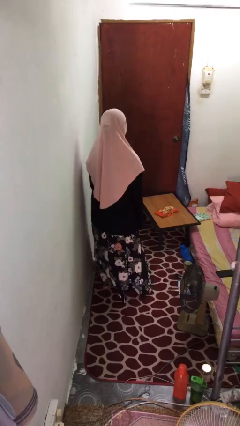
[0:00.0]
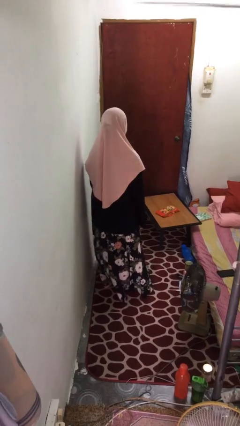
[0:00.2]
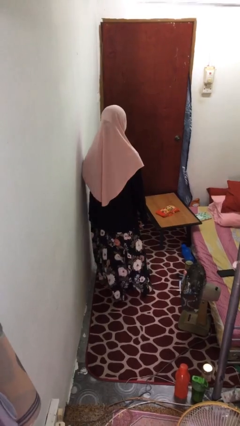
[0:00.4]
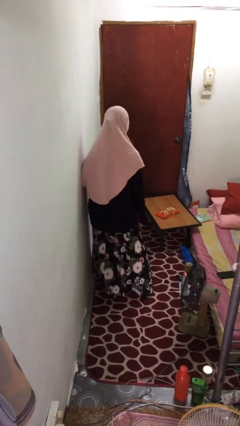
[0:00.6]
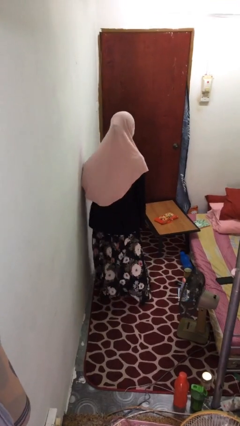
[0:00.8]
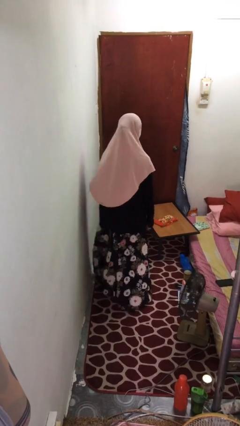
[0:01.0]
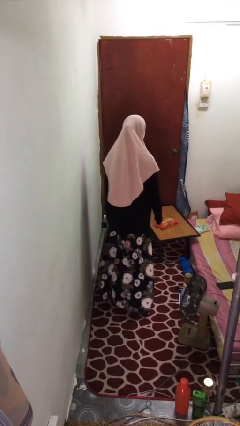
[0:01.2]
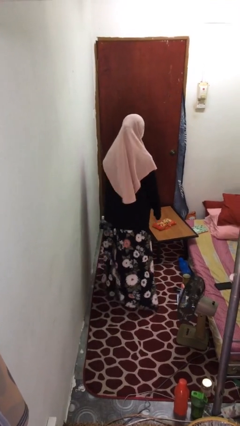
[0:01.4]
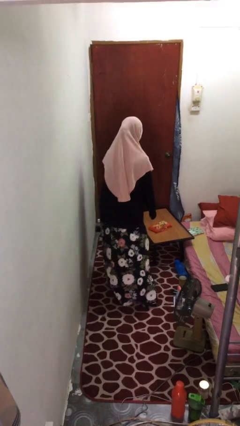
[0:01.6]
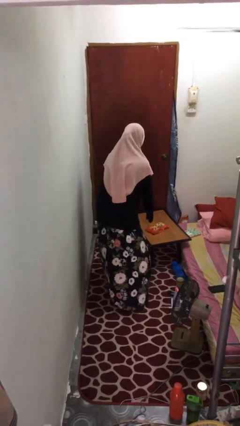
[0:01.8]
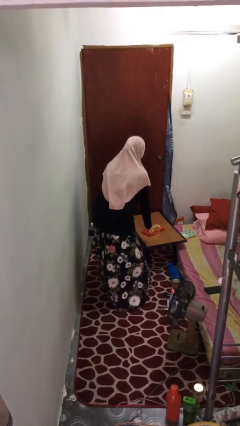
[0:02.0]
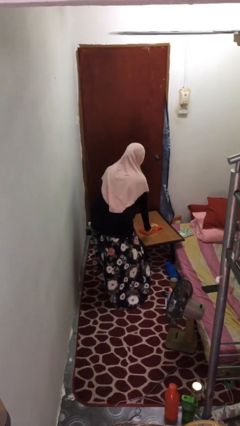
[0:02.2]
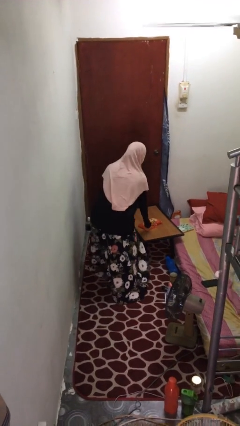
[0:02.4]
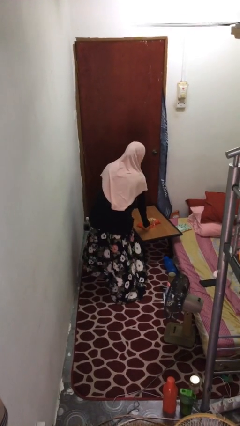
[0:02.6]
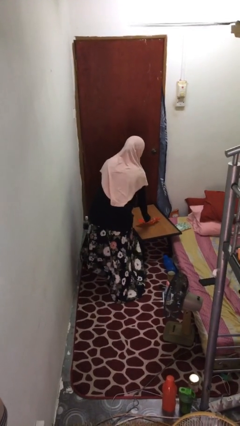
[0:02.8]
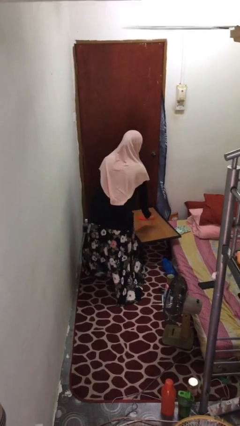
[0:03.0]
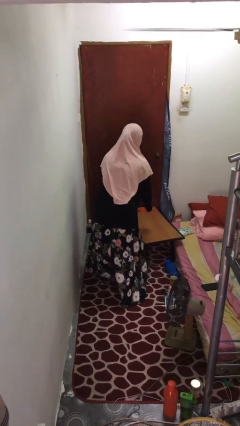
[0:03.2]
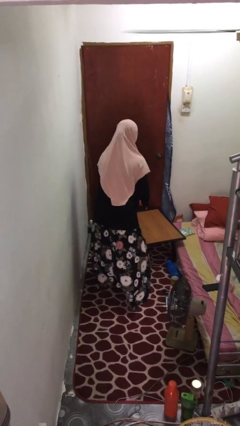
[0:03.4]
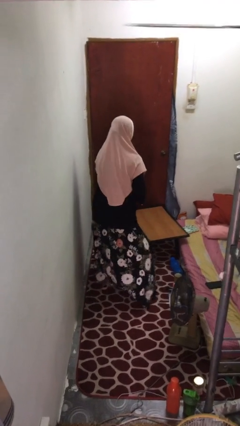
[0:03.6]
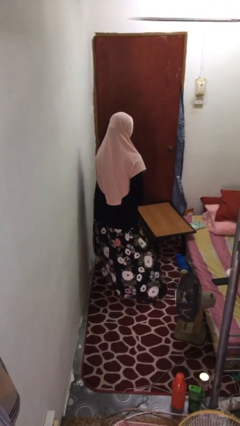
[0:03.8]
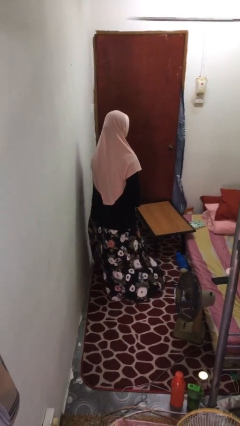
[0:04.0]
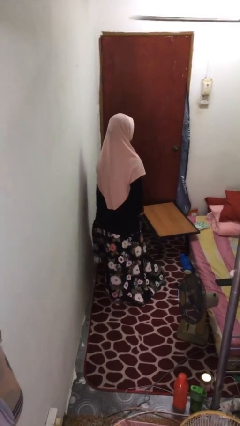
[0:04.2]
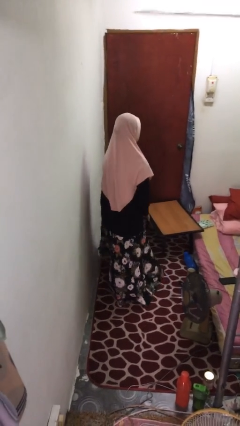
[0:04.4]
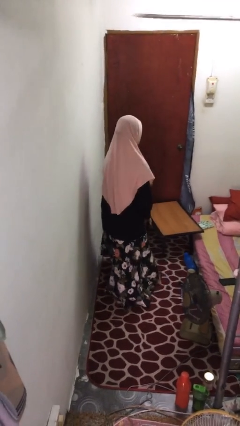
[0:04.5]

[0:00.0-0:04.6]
person picks up object from table

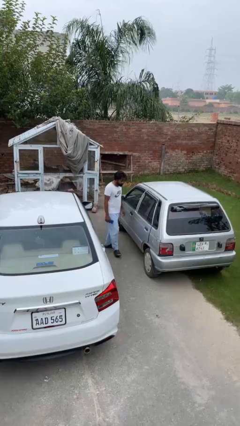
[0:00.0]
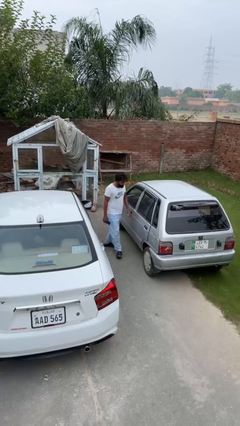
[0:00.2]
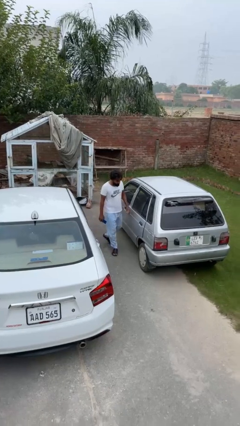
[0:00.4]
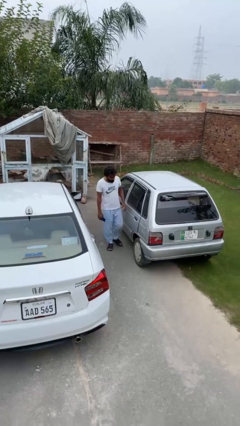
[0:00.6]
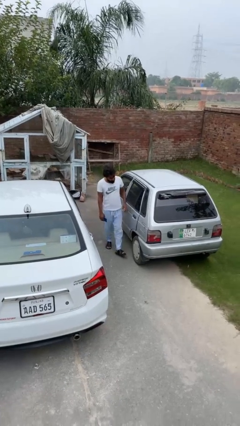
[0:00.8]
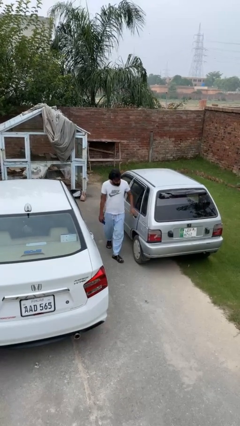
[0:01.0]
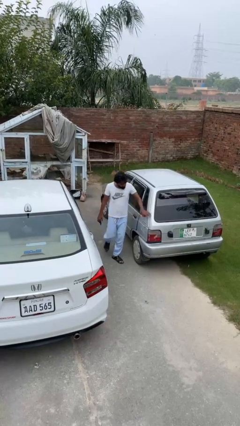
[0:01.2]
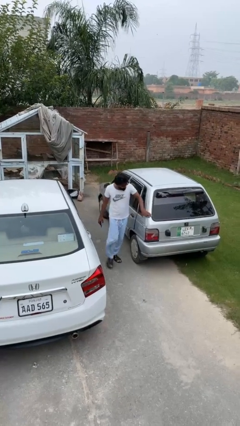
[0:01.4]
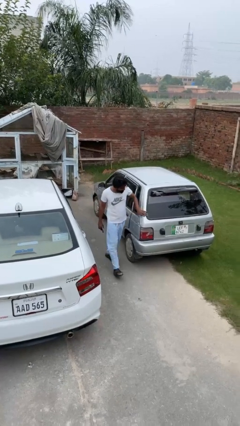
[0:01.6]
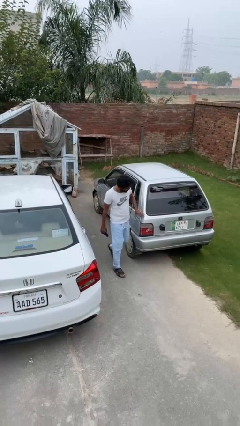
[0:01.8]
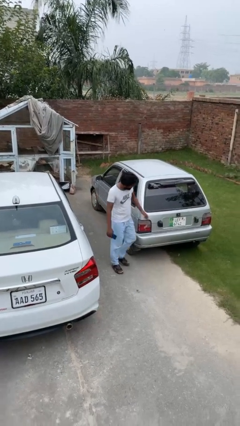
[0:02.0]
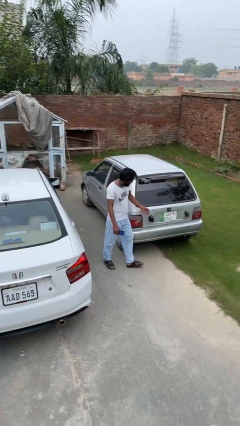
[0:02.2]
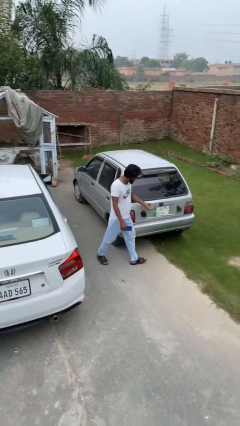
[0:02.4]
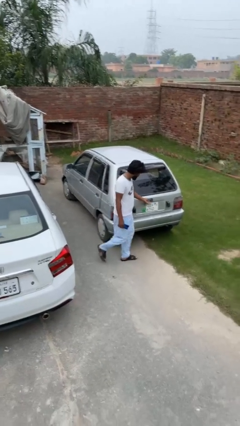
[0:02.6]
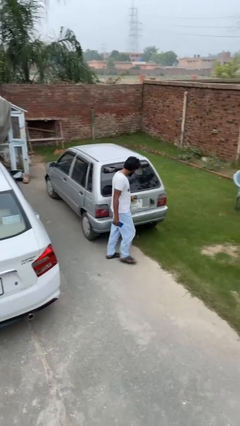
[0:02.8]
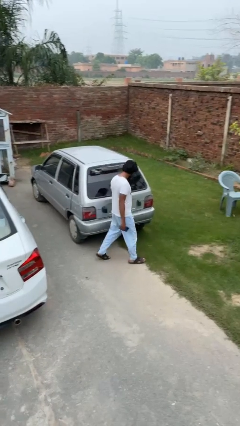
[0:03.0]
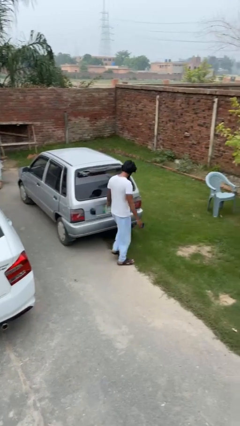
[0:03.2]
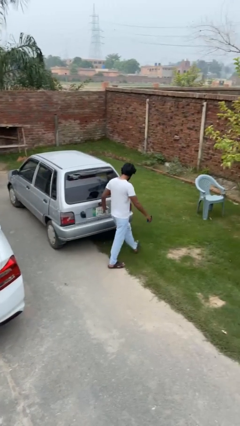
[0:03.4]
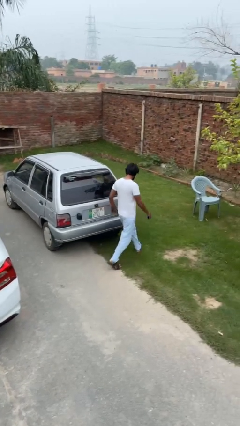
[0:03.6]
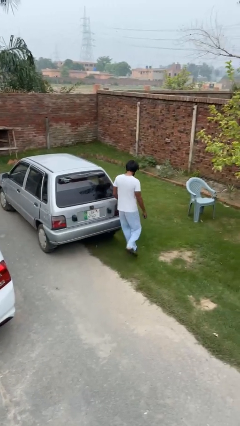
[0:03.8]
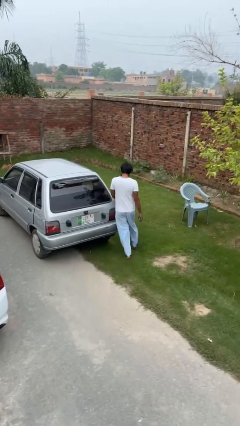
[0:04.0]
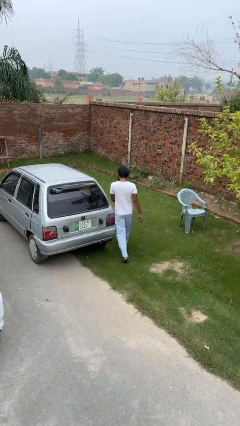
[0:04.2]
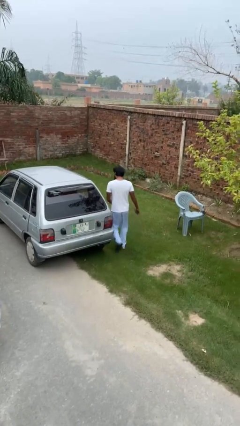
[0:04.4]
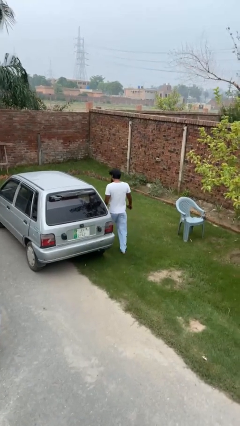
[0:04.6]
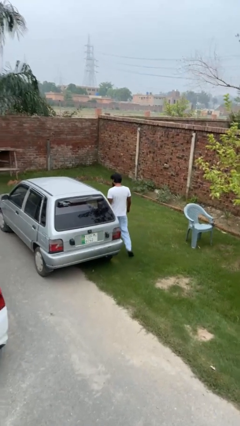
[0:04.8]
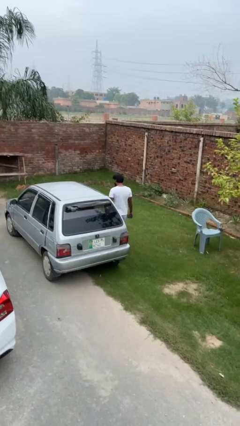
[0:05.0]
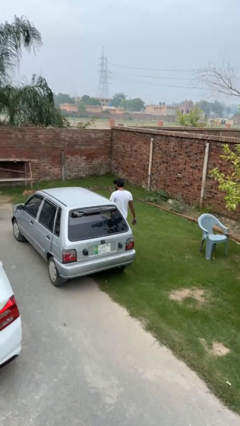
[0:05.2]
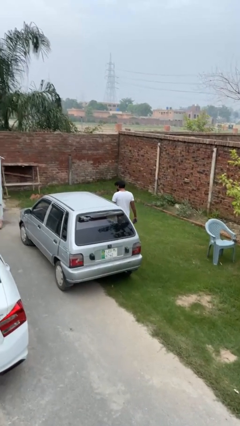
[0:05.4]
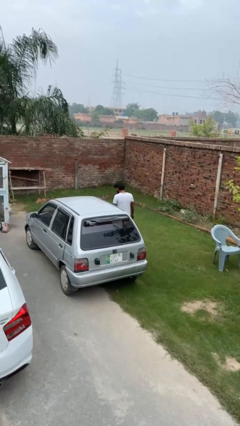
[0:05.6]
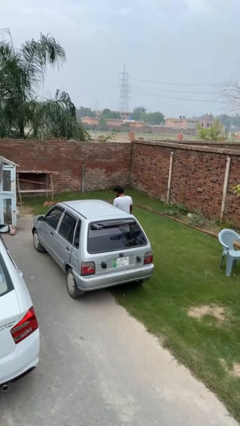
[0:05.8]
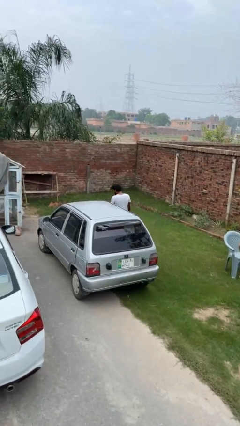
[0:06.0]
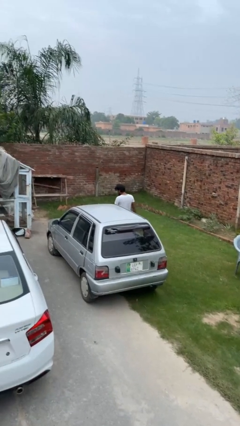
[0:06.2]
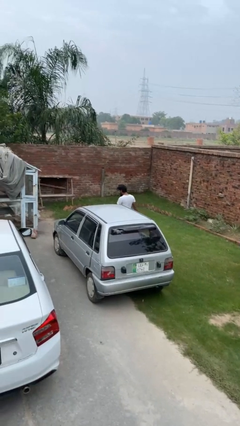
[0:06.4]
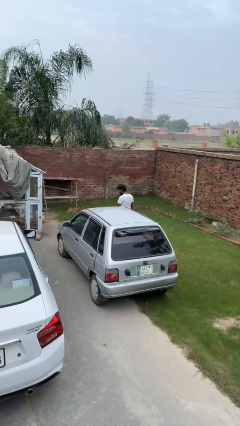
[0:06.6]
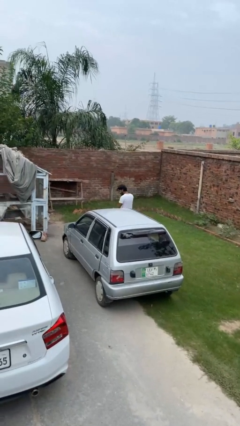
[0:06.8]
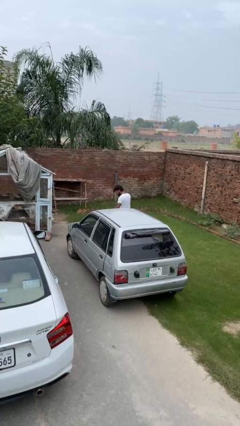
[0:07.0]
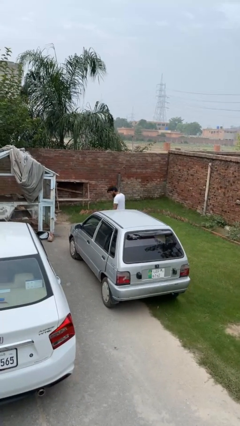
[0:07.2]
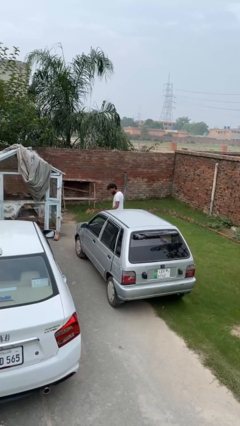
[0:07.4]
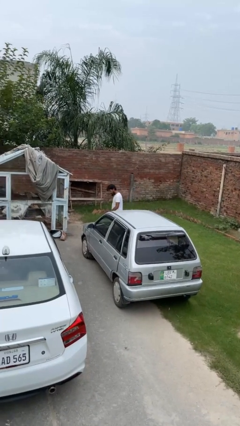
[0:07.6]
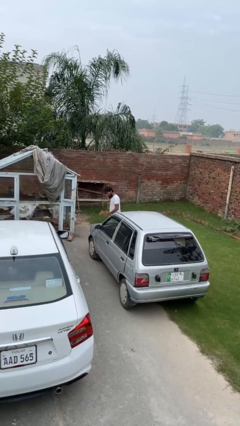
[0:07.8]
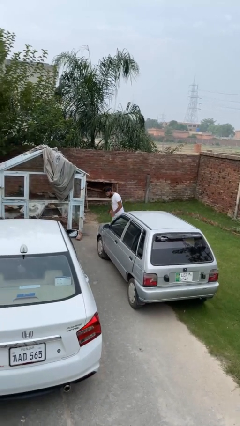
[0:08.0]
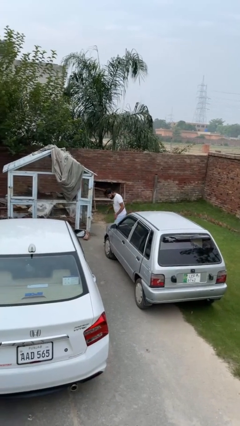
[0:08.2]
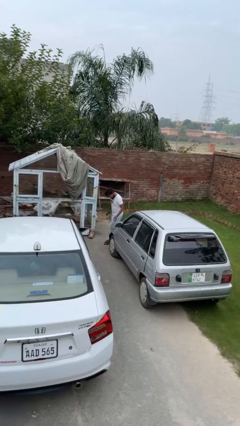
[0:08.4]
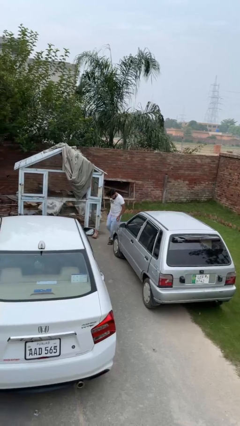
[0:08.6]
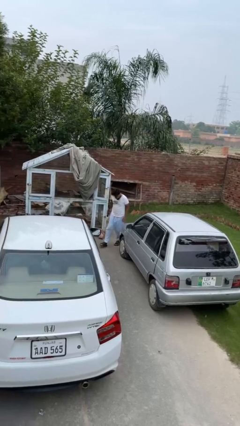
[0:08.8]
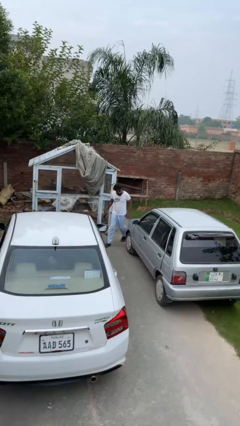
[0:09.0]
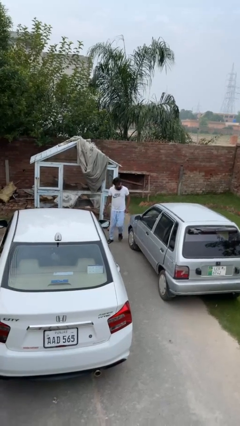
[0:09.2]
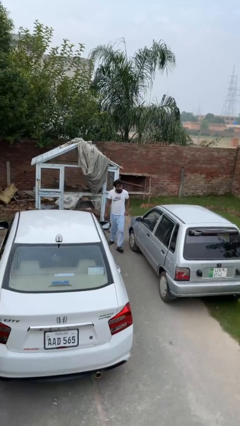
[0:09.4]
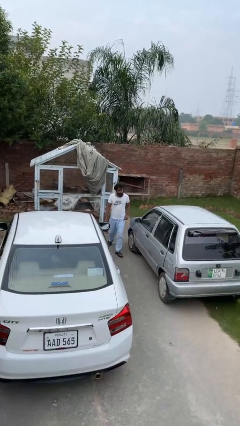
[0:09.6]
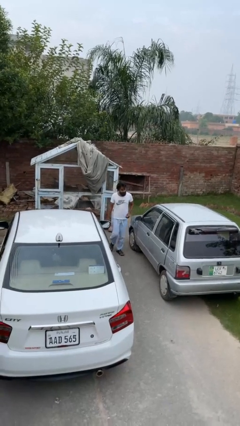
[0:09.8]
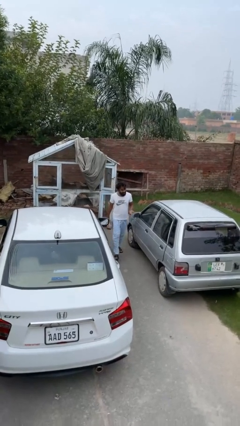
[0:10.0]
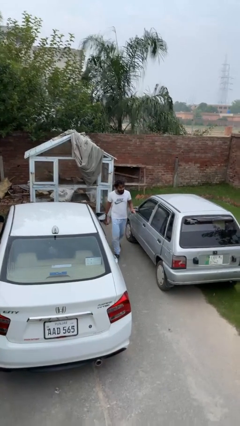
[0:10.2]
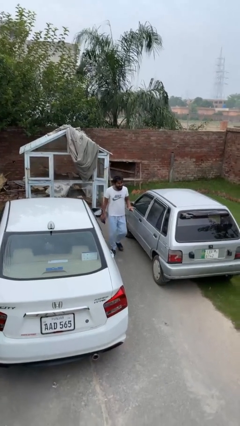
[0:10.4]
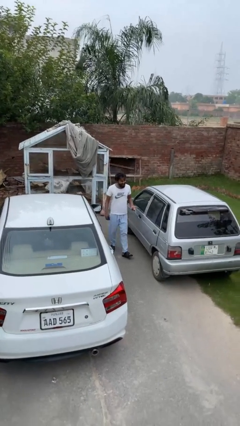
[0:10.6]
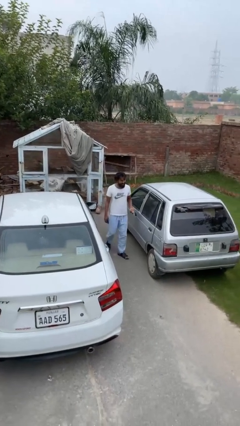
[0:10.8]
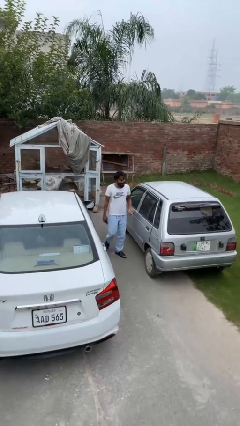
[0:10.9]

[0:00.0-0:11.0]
person walks around car

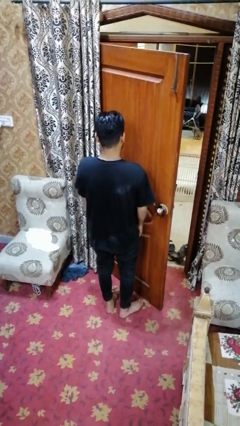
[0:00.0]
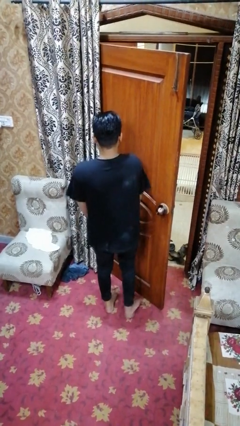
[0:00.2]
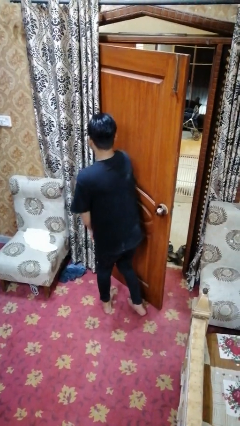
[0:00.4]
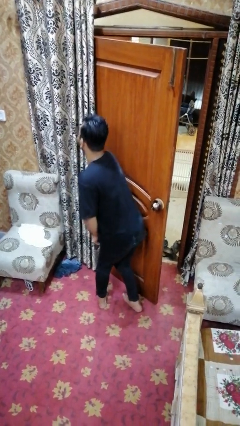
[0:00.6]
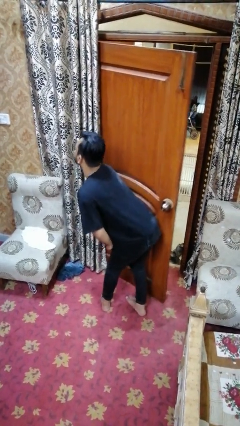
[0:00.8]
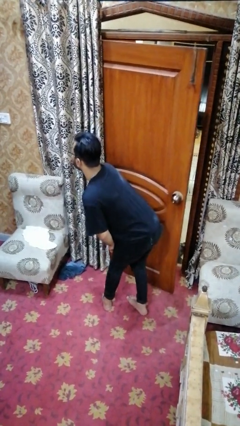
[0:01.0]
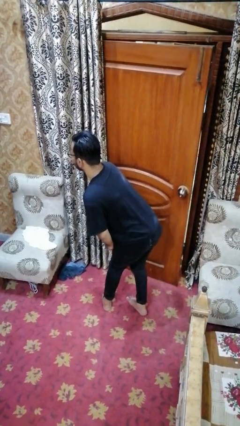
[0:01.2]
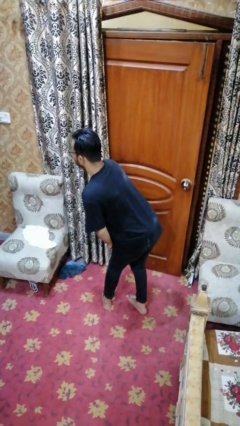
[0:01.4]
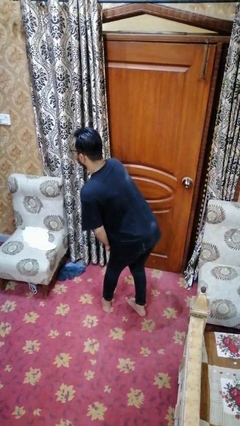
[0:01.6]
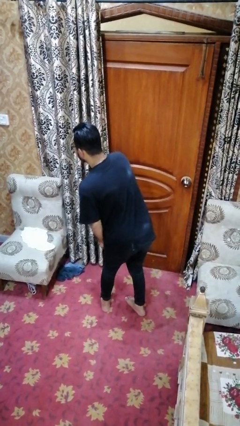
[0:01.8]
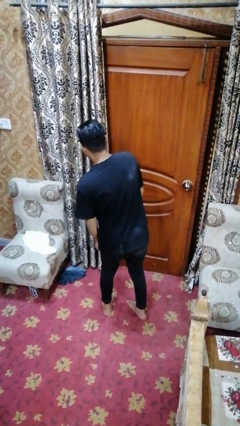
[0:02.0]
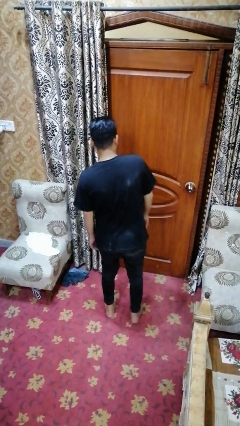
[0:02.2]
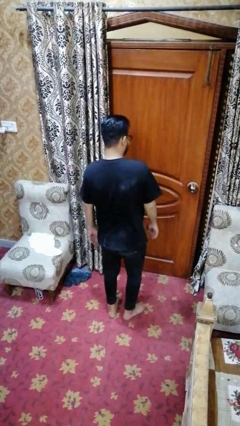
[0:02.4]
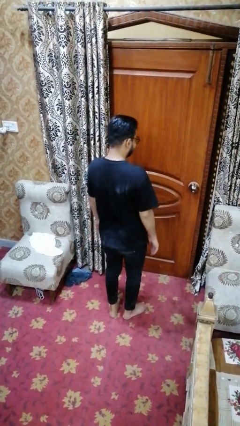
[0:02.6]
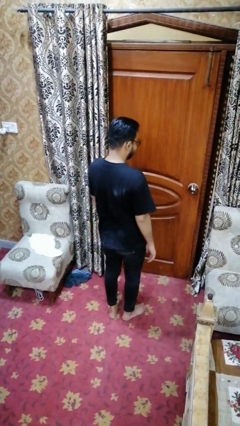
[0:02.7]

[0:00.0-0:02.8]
person closes door with hip
